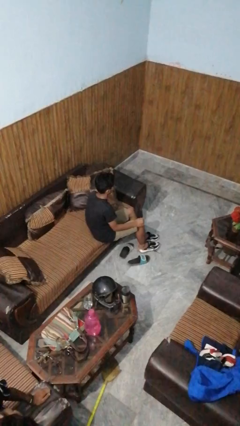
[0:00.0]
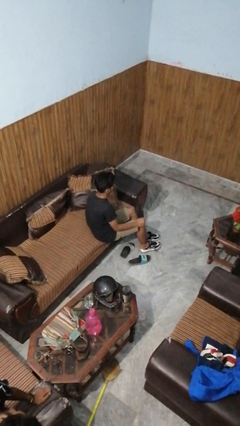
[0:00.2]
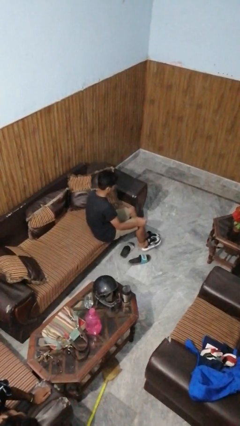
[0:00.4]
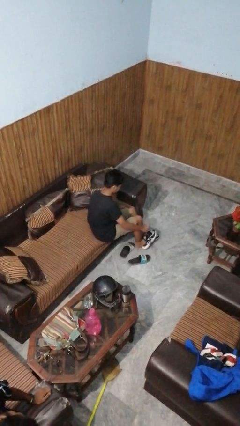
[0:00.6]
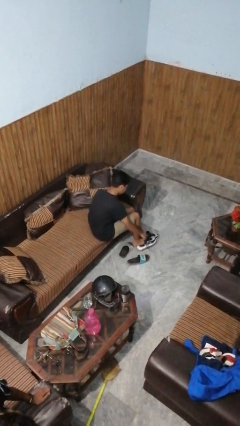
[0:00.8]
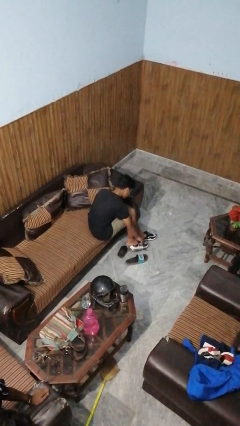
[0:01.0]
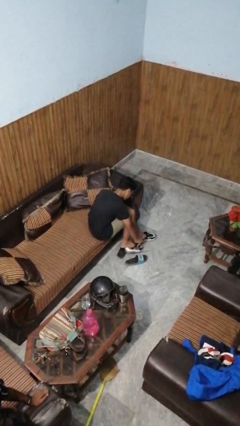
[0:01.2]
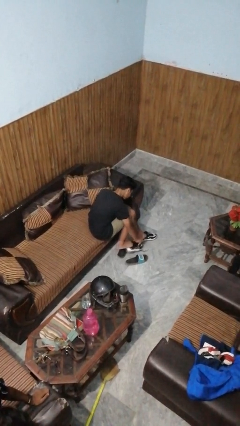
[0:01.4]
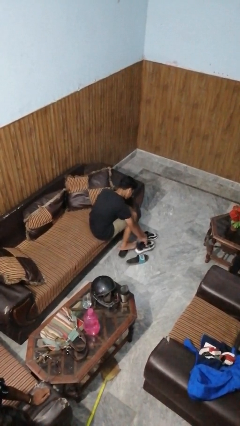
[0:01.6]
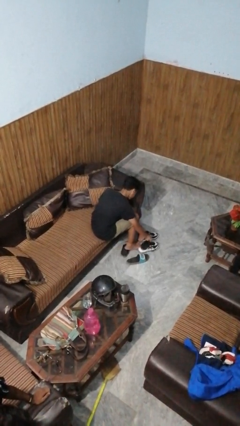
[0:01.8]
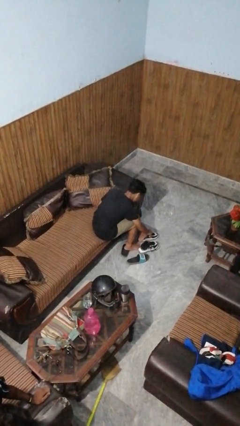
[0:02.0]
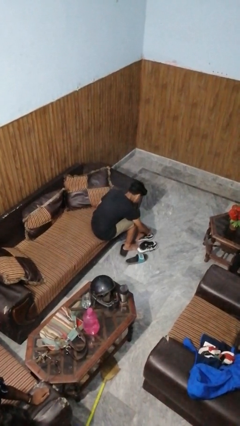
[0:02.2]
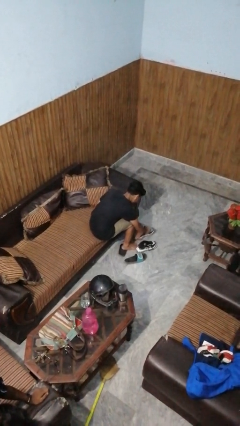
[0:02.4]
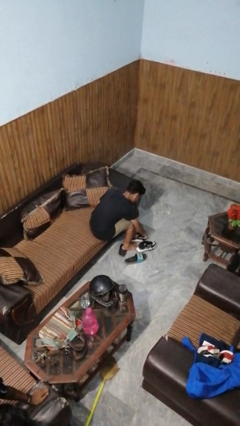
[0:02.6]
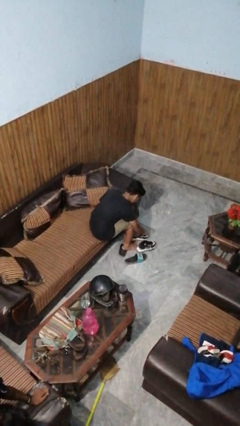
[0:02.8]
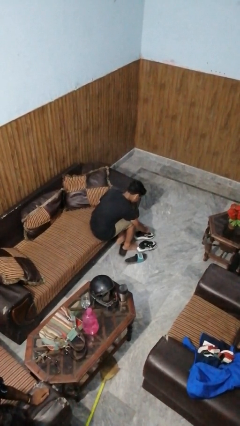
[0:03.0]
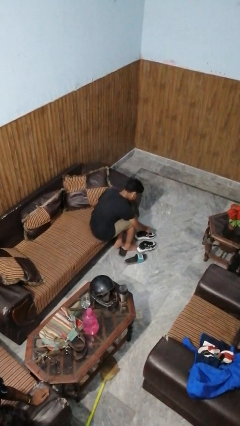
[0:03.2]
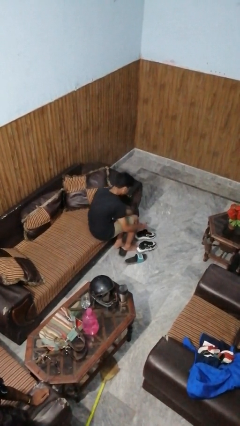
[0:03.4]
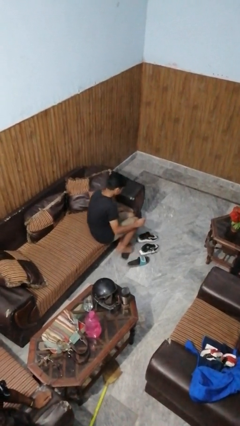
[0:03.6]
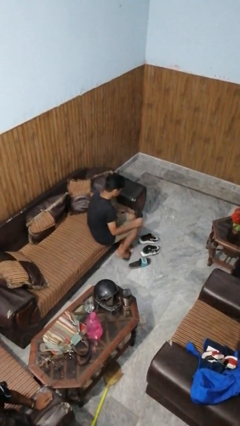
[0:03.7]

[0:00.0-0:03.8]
person takes off shoes

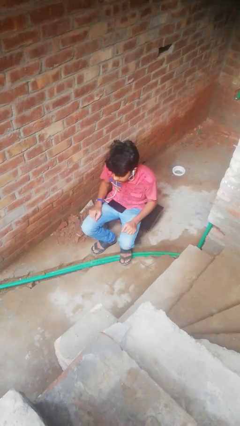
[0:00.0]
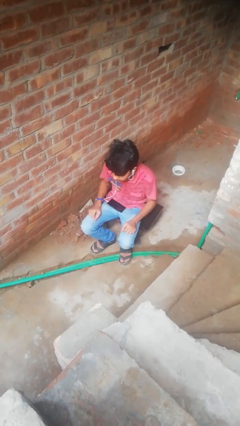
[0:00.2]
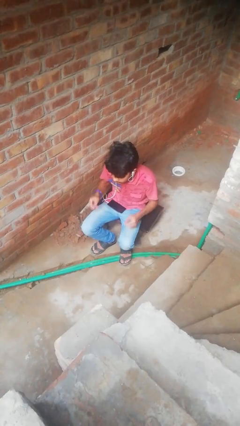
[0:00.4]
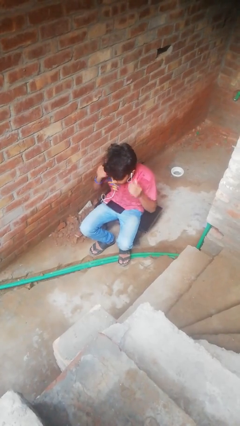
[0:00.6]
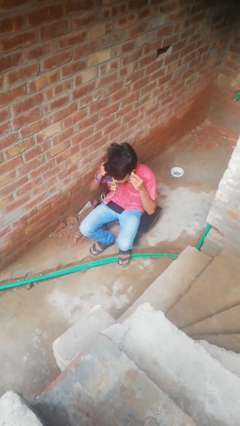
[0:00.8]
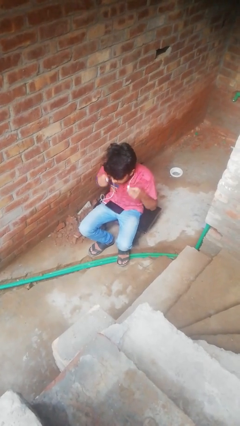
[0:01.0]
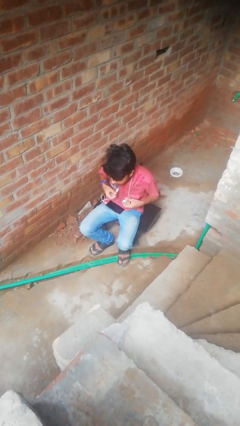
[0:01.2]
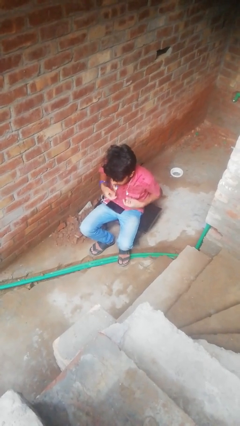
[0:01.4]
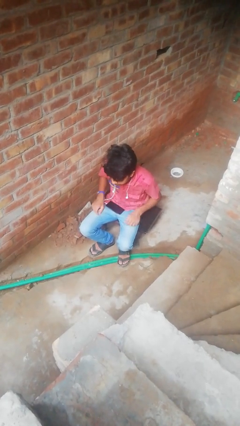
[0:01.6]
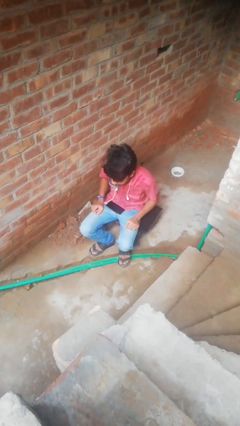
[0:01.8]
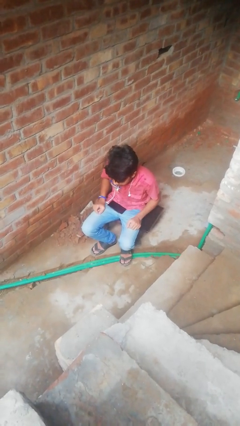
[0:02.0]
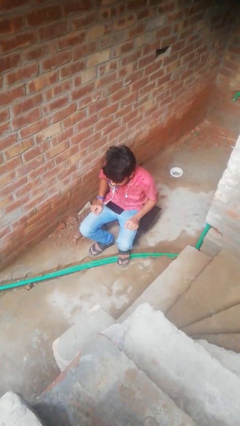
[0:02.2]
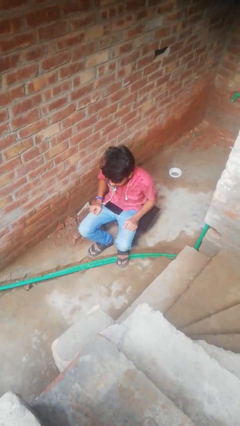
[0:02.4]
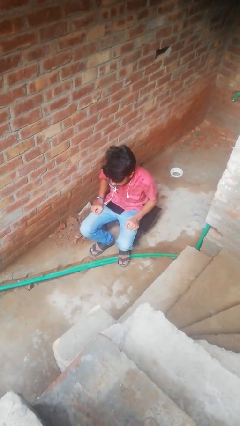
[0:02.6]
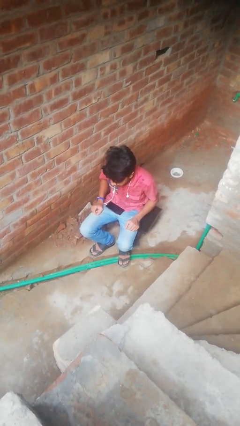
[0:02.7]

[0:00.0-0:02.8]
person takes off headphones

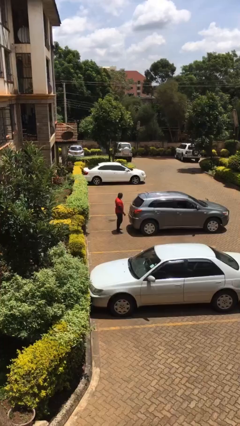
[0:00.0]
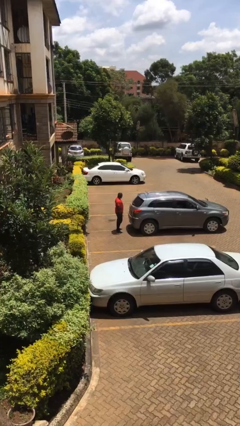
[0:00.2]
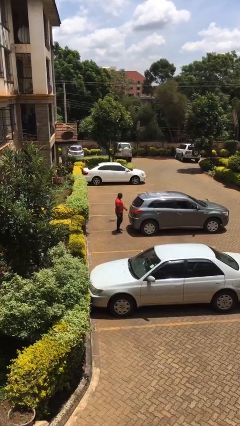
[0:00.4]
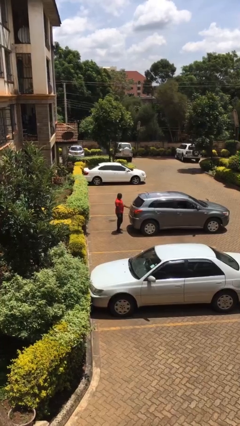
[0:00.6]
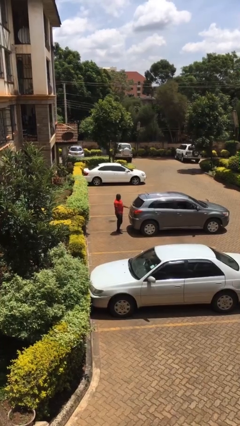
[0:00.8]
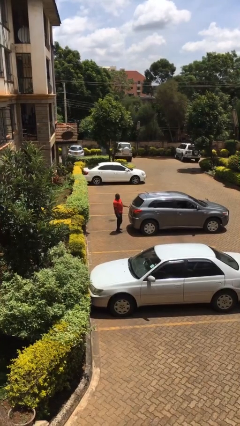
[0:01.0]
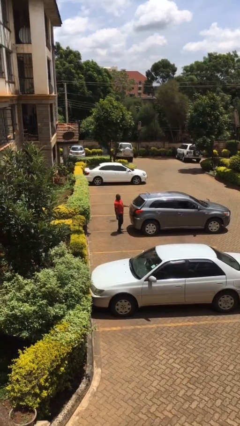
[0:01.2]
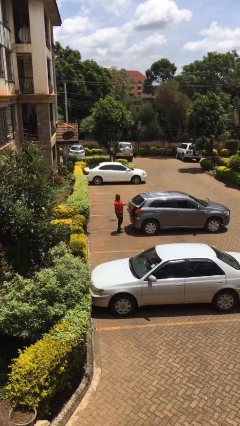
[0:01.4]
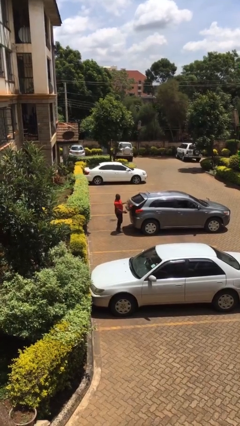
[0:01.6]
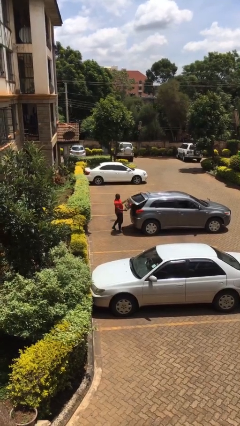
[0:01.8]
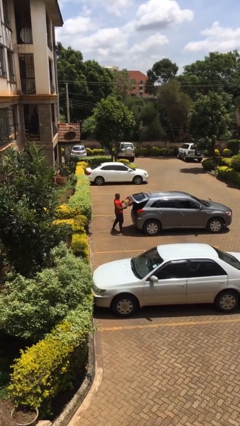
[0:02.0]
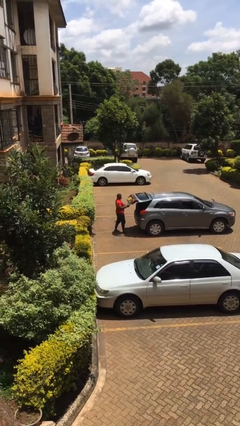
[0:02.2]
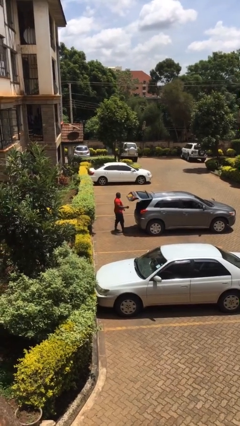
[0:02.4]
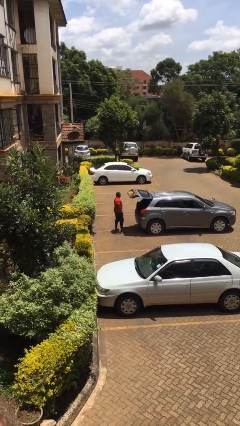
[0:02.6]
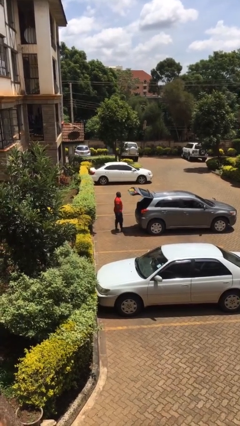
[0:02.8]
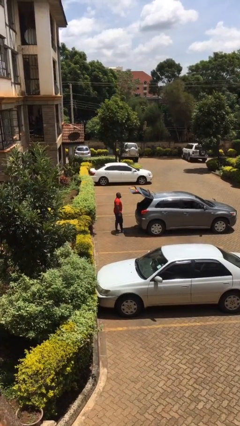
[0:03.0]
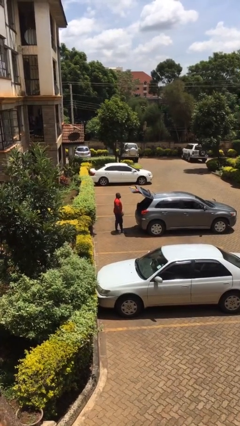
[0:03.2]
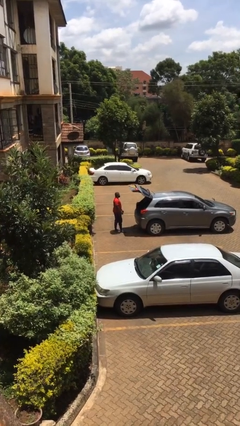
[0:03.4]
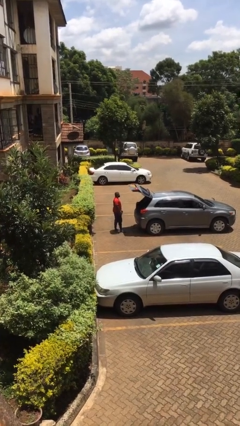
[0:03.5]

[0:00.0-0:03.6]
person opens car trunk

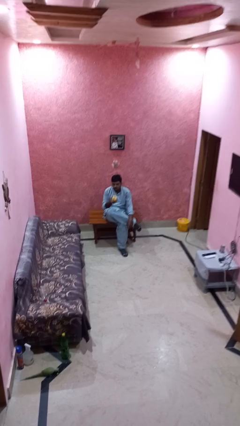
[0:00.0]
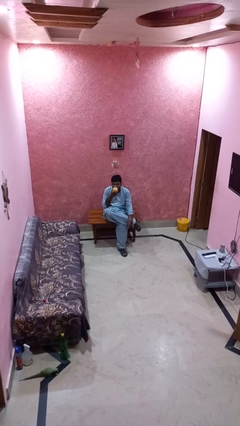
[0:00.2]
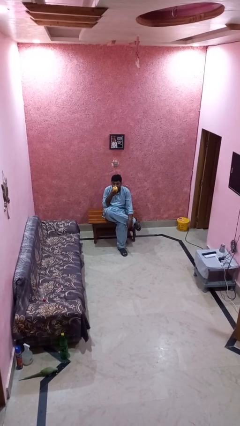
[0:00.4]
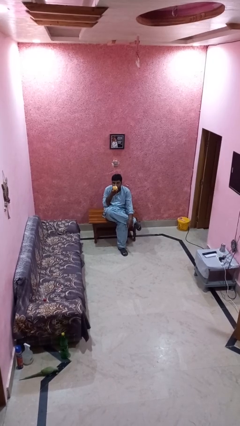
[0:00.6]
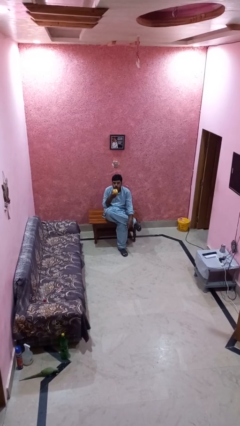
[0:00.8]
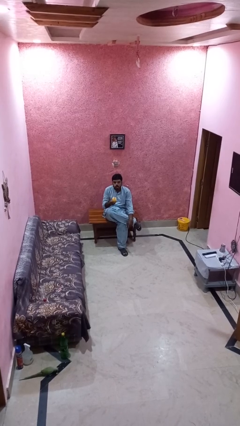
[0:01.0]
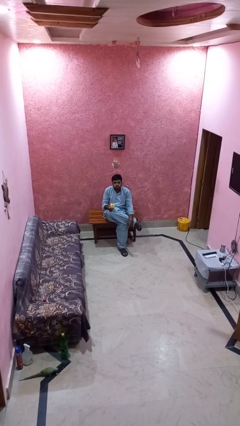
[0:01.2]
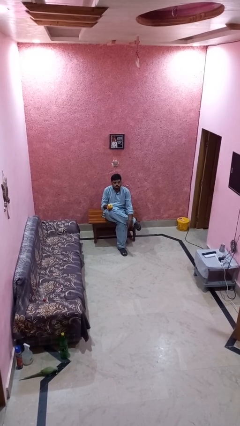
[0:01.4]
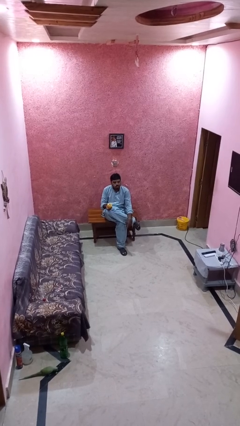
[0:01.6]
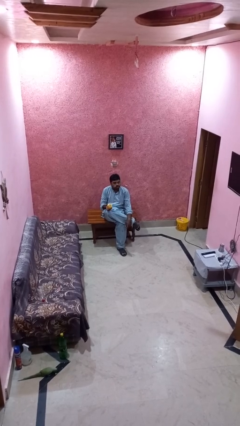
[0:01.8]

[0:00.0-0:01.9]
person eats apple

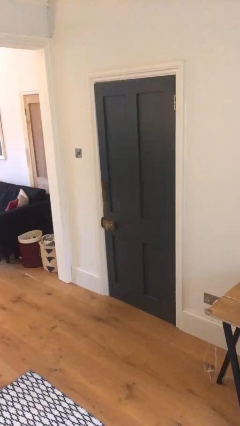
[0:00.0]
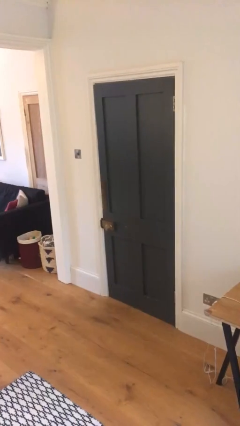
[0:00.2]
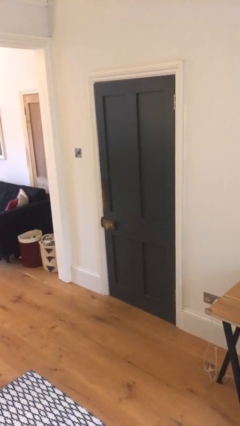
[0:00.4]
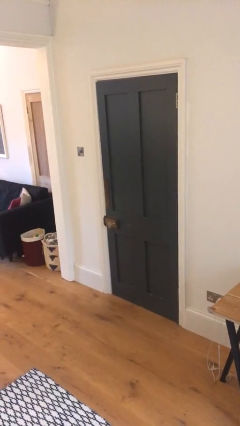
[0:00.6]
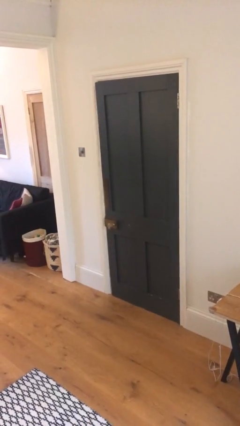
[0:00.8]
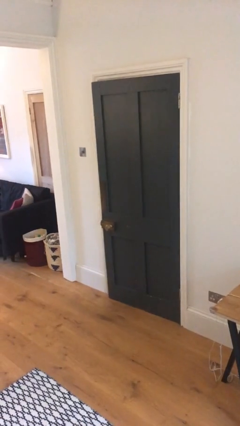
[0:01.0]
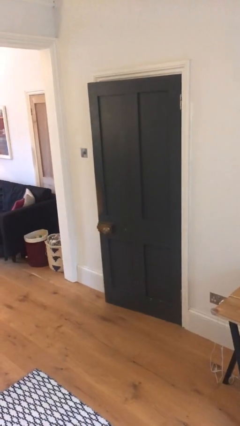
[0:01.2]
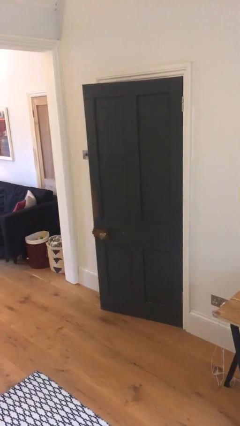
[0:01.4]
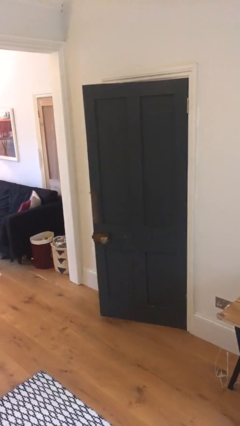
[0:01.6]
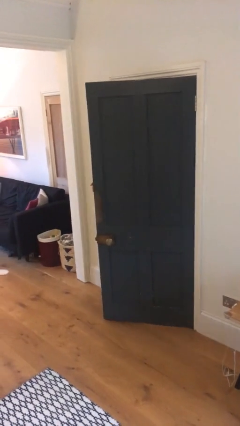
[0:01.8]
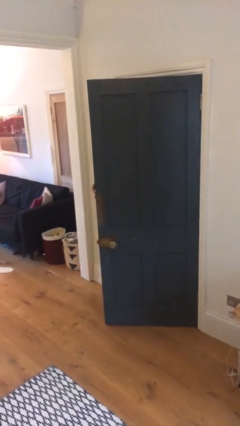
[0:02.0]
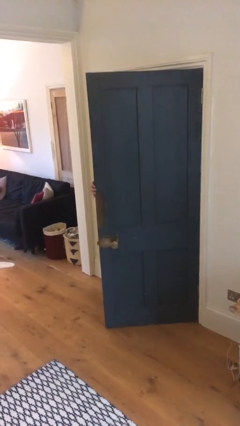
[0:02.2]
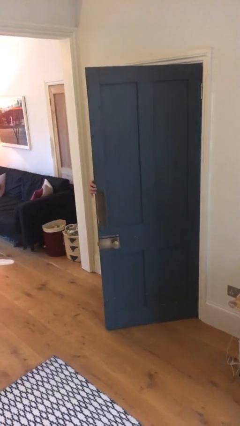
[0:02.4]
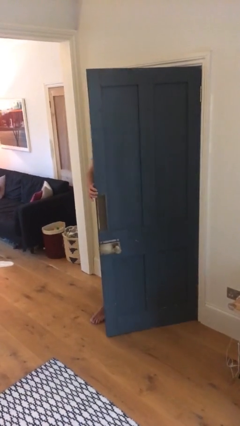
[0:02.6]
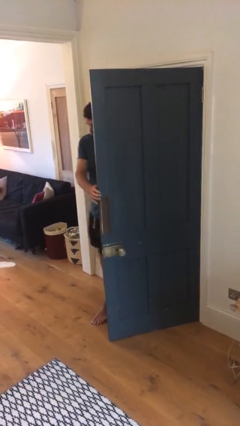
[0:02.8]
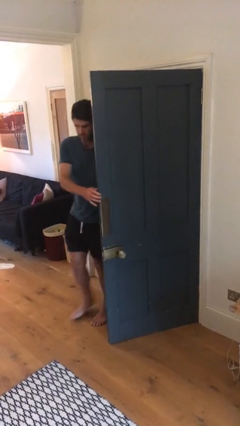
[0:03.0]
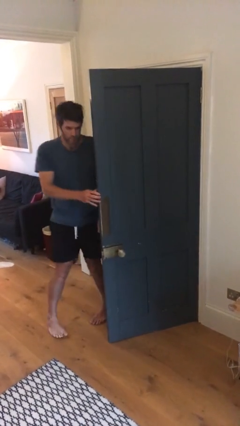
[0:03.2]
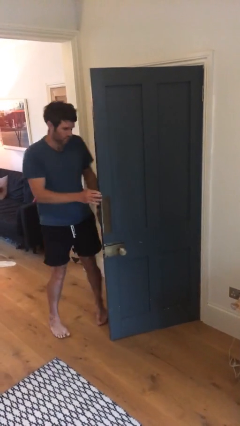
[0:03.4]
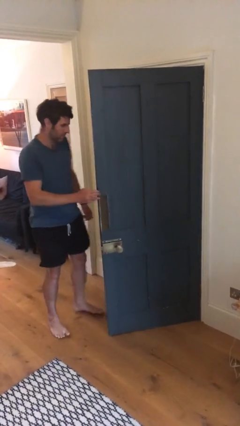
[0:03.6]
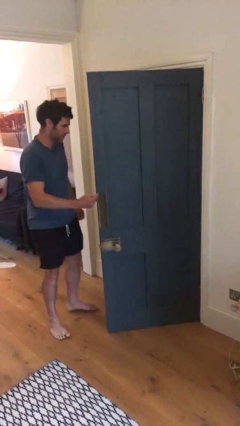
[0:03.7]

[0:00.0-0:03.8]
person opens facility door

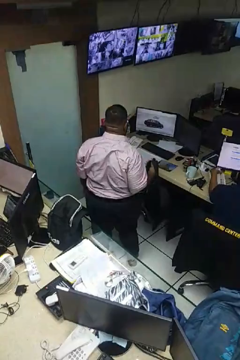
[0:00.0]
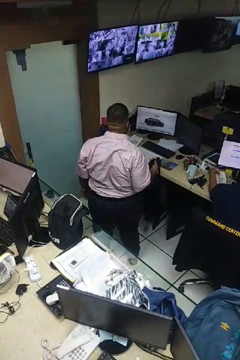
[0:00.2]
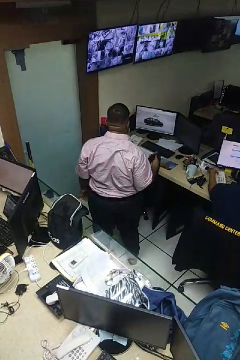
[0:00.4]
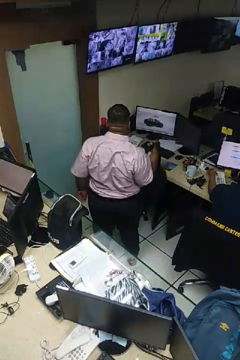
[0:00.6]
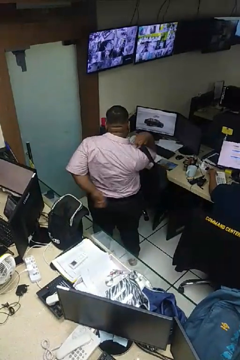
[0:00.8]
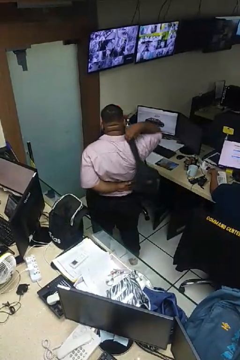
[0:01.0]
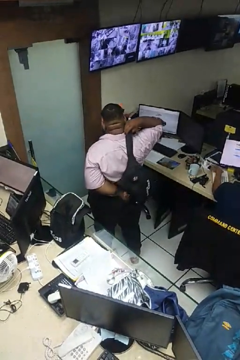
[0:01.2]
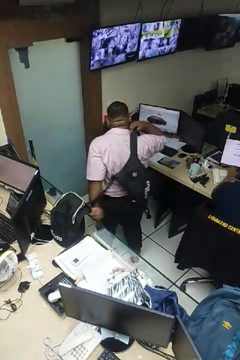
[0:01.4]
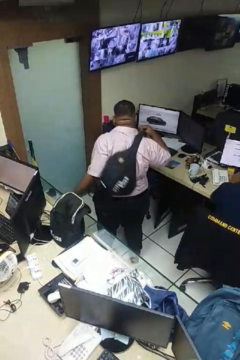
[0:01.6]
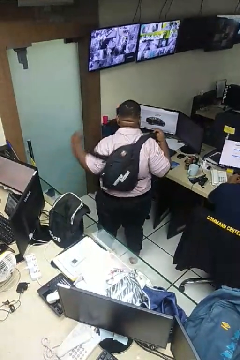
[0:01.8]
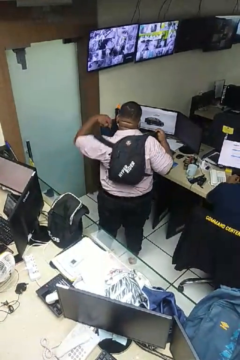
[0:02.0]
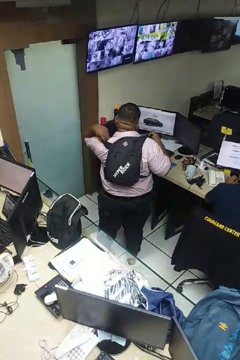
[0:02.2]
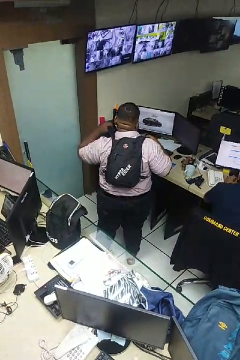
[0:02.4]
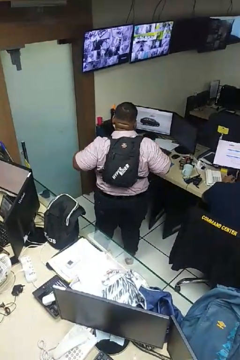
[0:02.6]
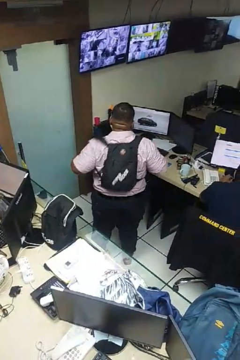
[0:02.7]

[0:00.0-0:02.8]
person puts on backpack
